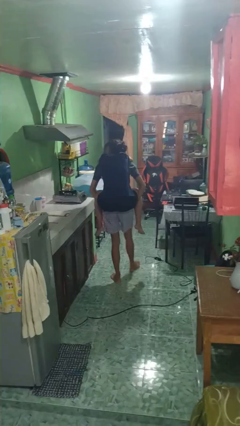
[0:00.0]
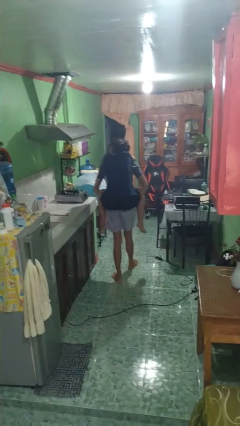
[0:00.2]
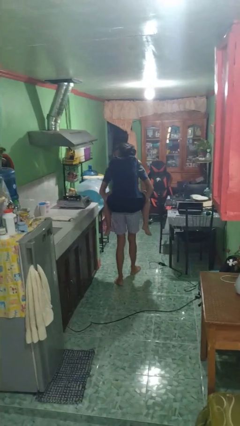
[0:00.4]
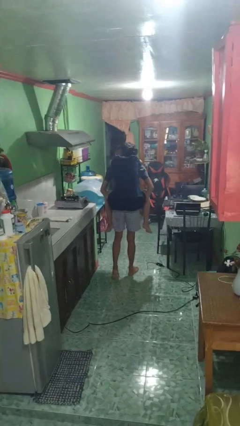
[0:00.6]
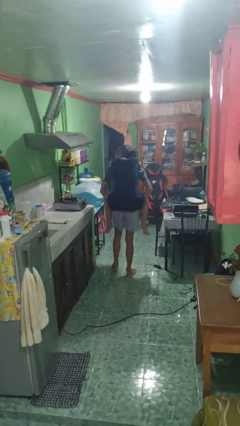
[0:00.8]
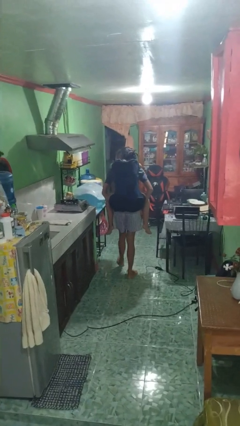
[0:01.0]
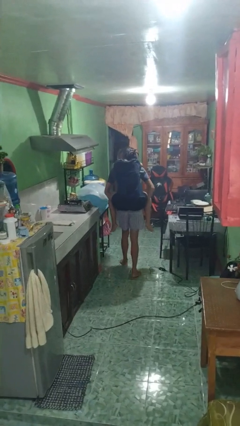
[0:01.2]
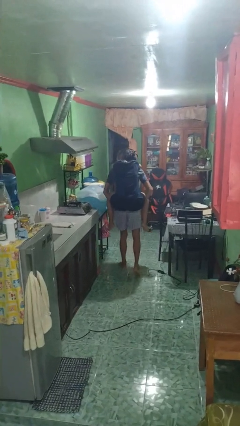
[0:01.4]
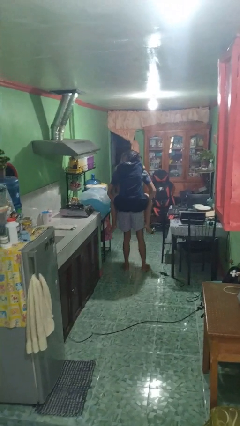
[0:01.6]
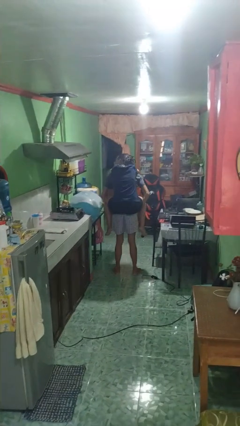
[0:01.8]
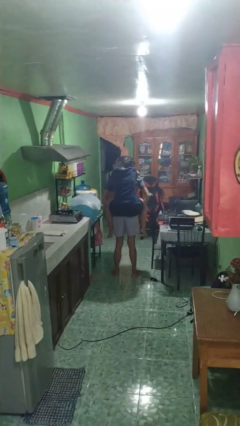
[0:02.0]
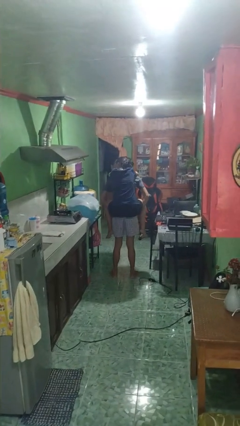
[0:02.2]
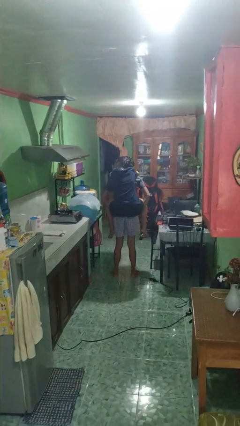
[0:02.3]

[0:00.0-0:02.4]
person carries person on back

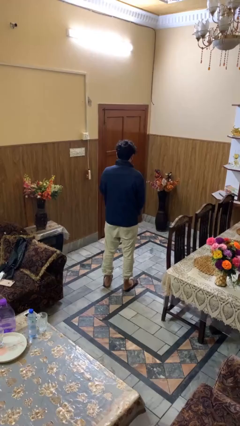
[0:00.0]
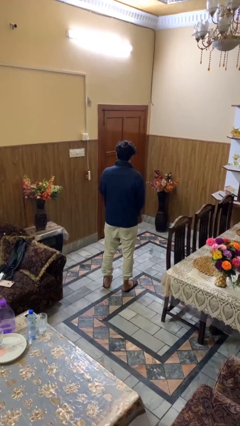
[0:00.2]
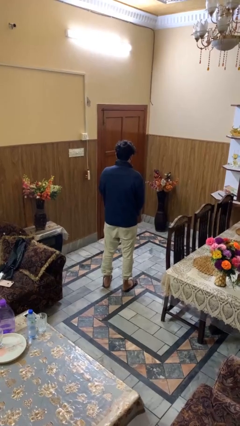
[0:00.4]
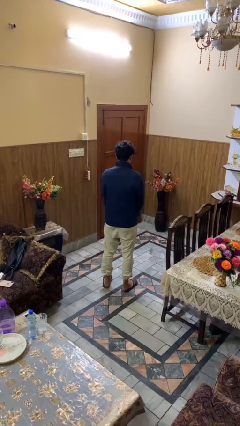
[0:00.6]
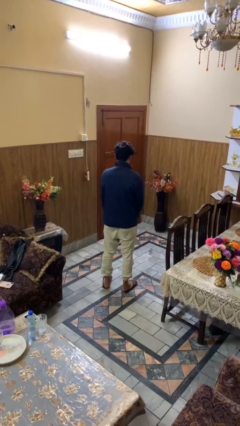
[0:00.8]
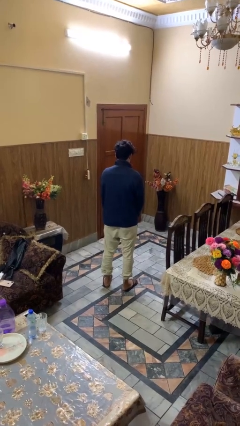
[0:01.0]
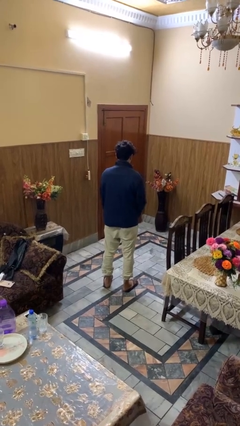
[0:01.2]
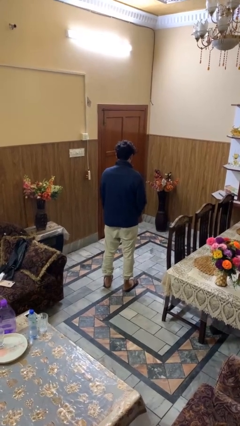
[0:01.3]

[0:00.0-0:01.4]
person unzips jacket

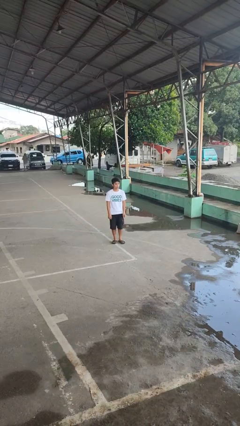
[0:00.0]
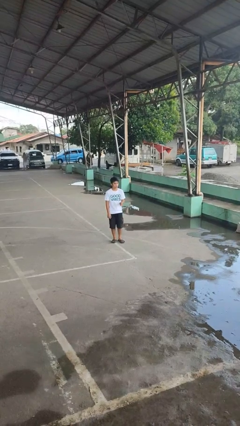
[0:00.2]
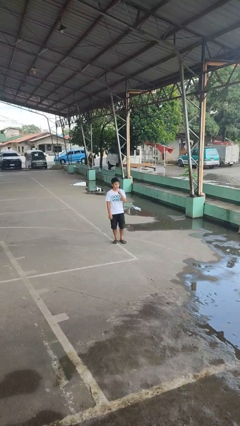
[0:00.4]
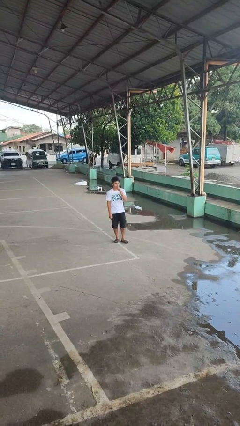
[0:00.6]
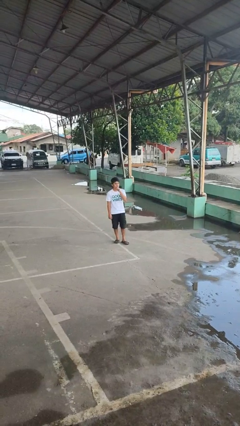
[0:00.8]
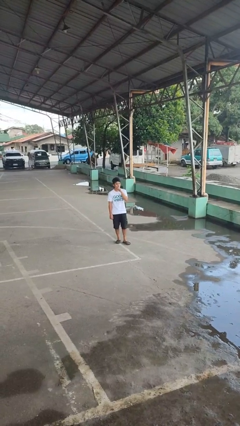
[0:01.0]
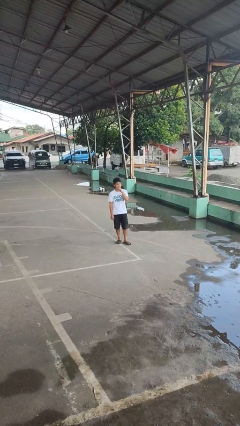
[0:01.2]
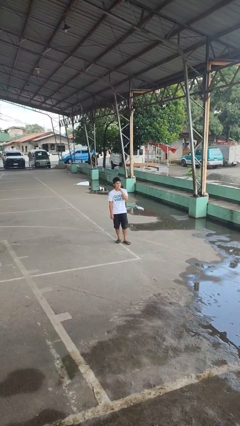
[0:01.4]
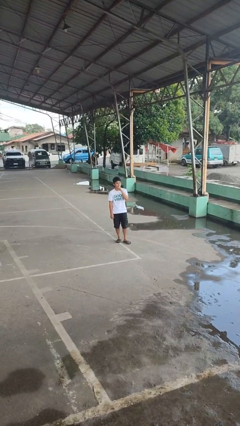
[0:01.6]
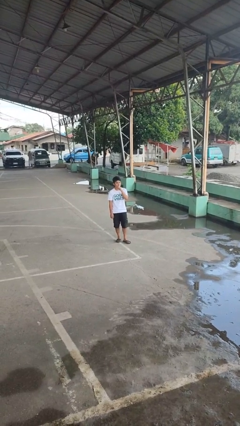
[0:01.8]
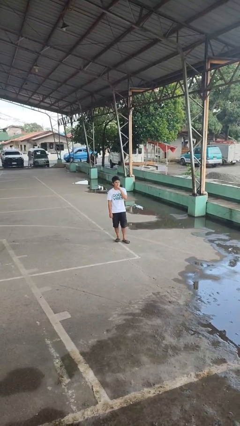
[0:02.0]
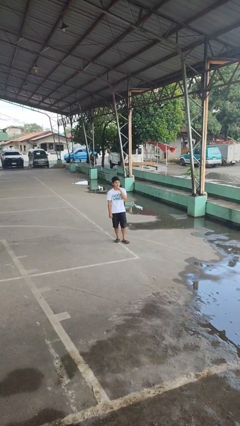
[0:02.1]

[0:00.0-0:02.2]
person gestures be quiet

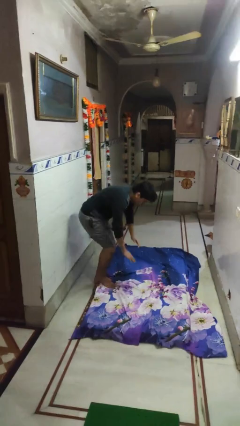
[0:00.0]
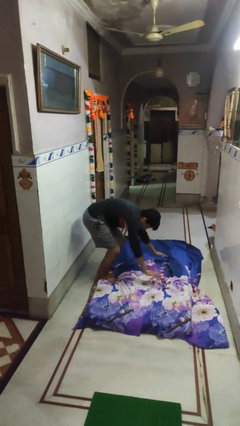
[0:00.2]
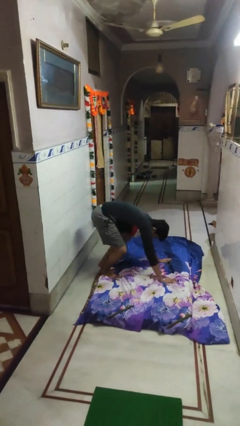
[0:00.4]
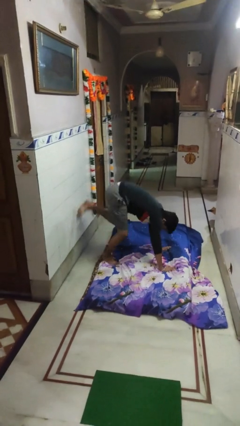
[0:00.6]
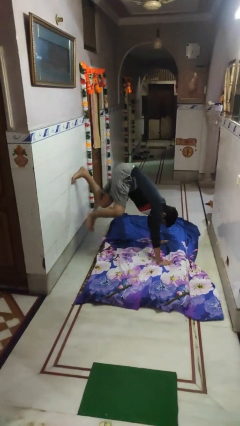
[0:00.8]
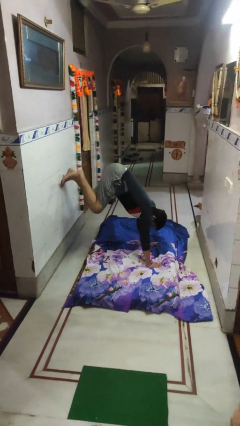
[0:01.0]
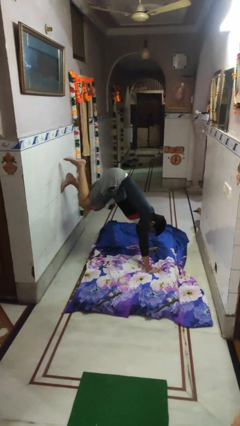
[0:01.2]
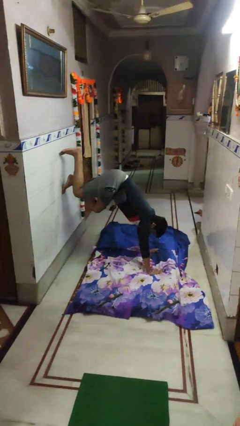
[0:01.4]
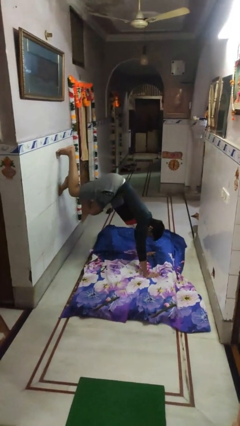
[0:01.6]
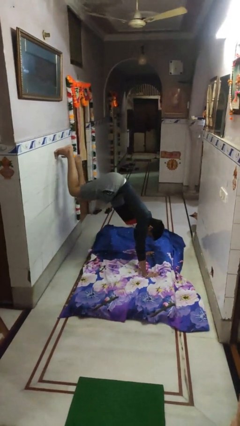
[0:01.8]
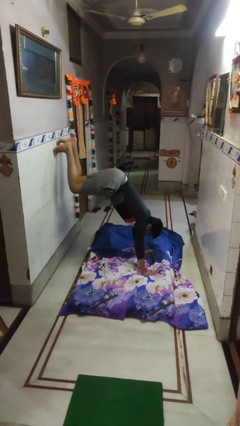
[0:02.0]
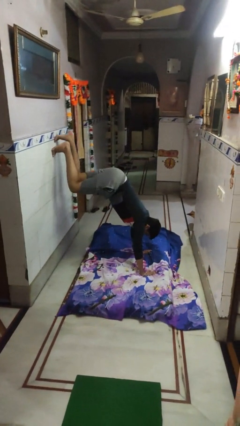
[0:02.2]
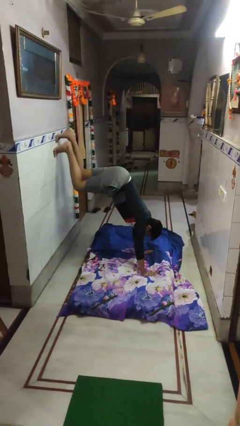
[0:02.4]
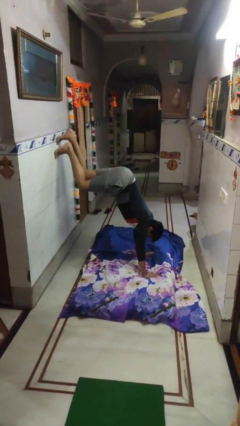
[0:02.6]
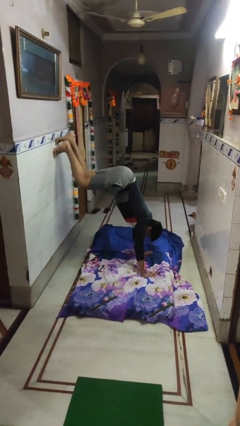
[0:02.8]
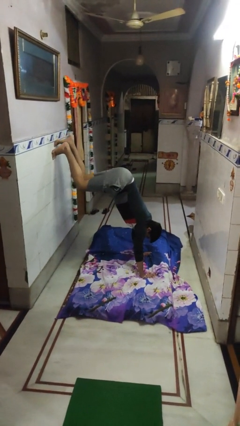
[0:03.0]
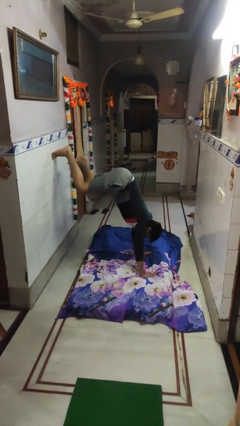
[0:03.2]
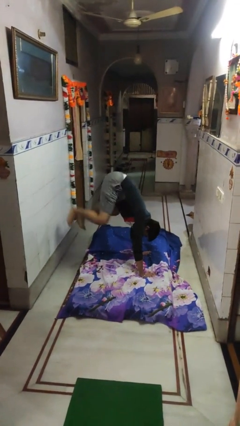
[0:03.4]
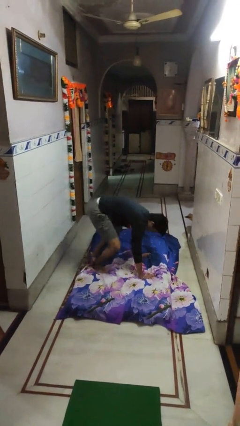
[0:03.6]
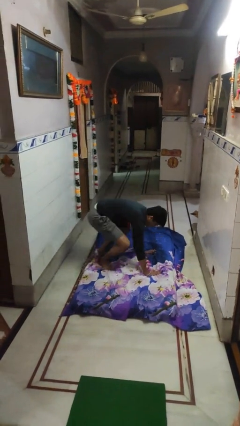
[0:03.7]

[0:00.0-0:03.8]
person handstand

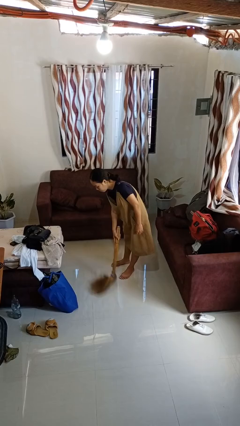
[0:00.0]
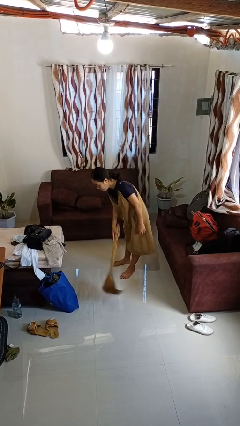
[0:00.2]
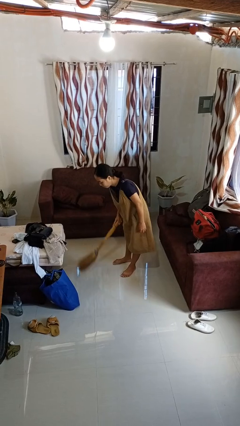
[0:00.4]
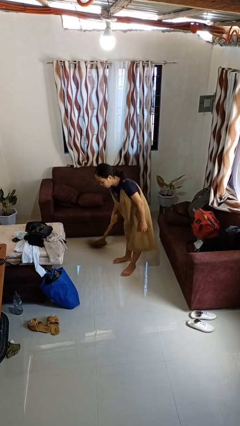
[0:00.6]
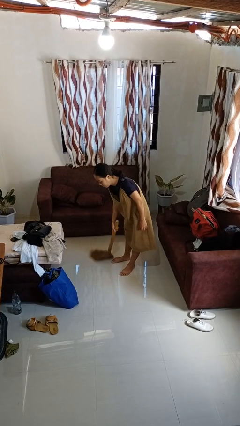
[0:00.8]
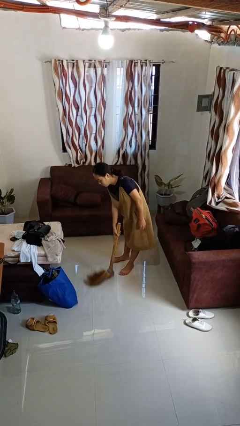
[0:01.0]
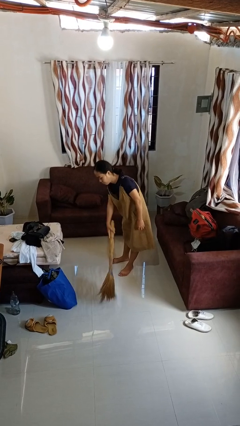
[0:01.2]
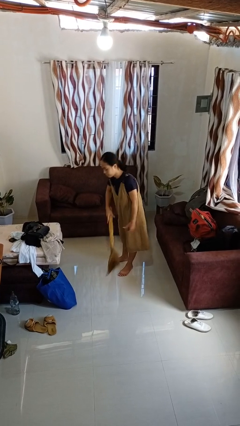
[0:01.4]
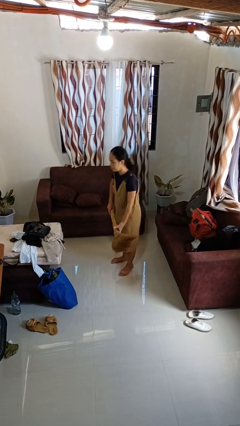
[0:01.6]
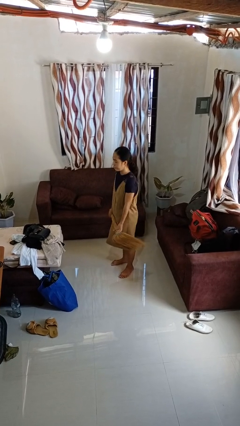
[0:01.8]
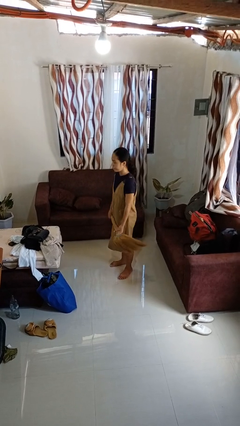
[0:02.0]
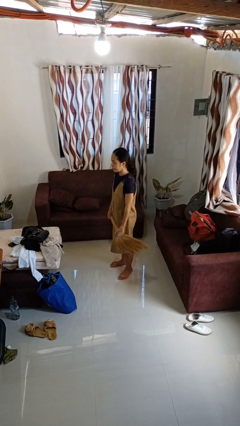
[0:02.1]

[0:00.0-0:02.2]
person sweeps floor

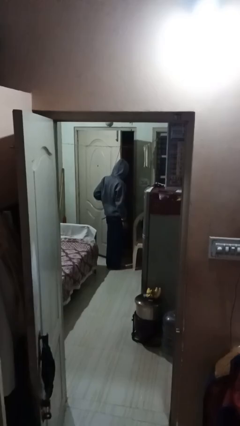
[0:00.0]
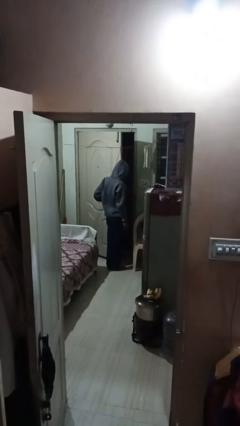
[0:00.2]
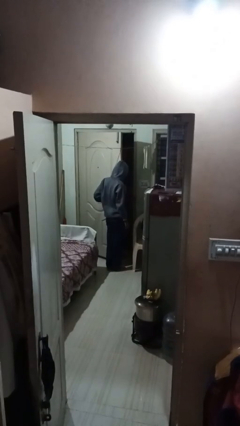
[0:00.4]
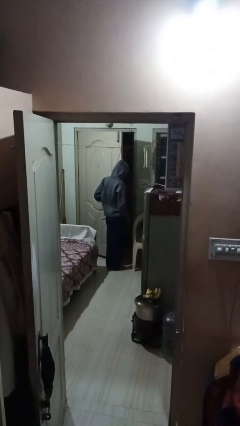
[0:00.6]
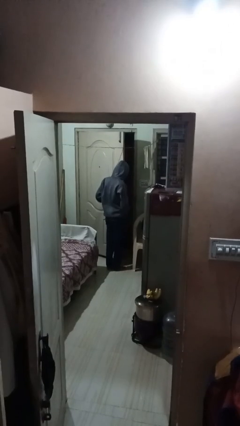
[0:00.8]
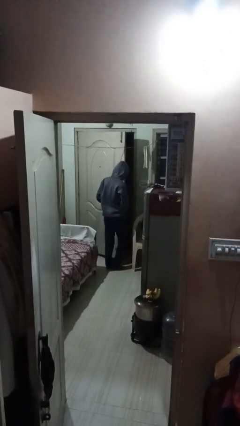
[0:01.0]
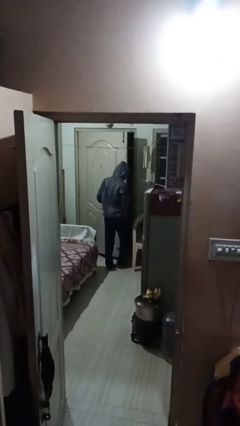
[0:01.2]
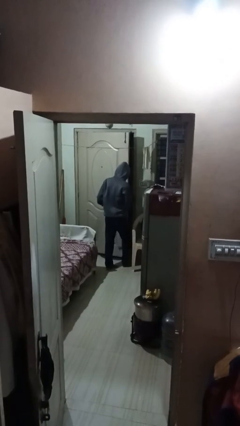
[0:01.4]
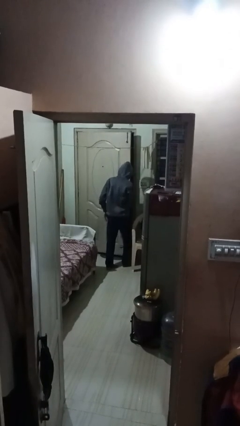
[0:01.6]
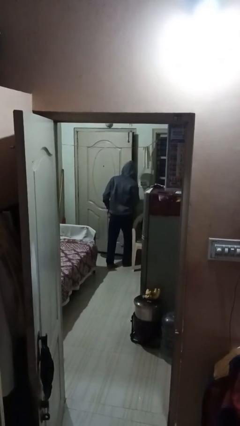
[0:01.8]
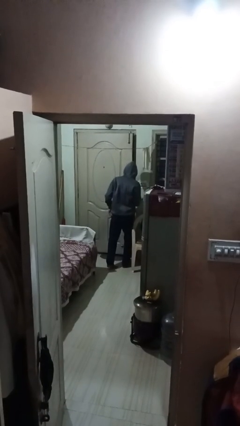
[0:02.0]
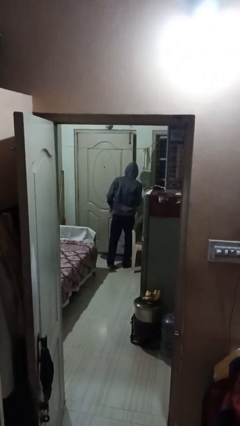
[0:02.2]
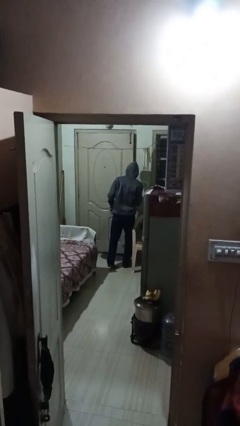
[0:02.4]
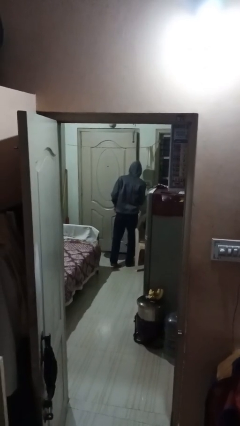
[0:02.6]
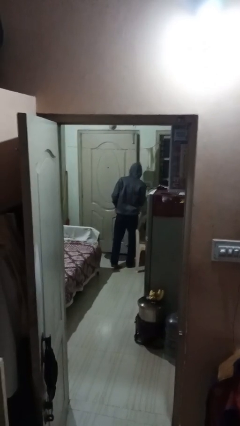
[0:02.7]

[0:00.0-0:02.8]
person closes facility door

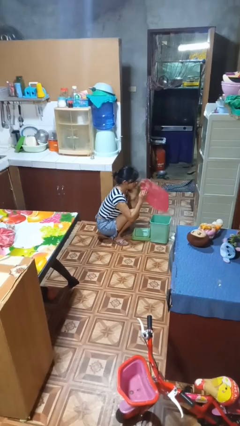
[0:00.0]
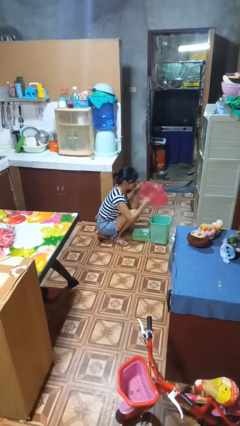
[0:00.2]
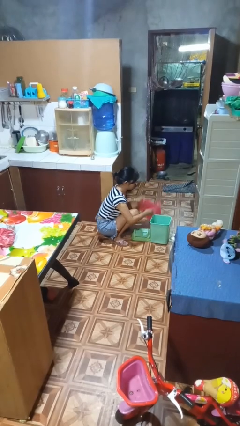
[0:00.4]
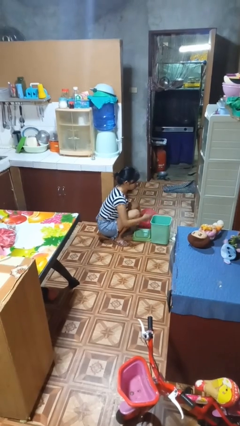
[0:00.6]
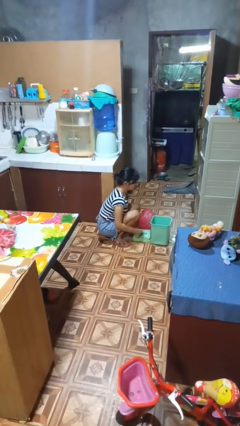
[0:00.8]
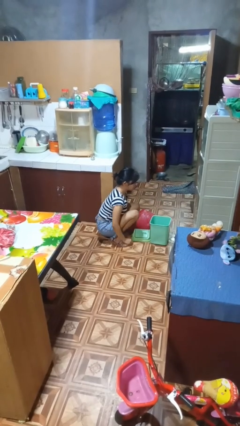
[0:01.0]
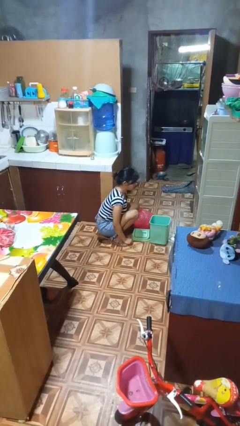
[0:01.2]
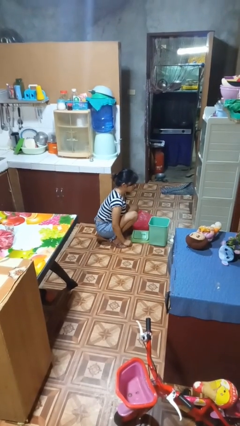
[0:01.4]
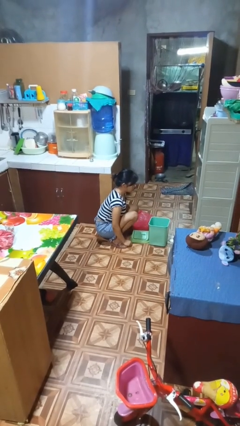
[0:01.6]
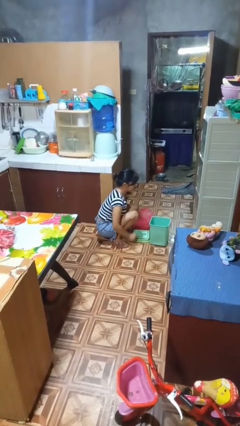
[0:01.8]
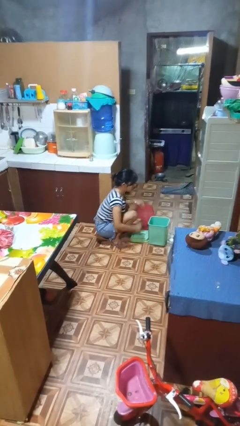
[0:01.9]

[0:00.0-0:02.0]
person removes trashbag from trashcan
